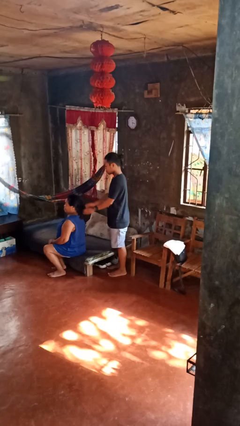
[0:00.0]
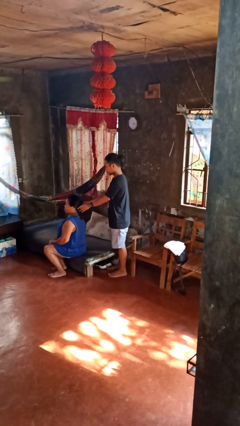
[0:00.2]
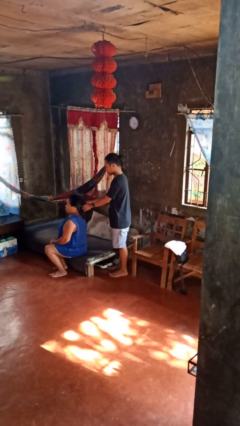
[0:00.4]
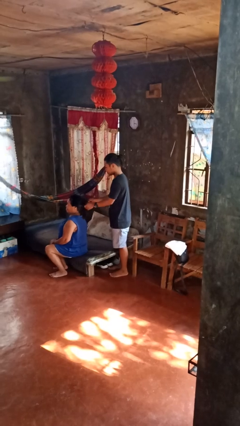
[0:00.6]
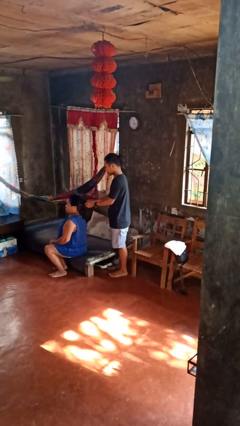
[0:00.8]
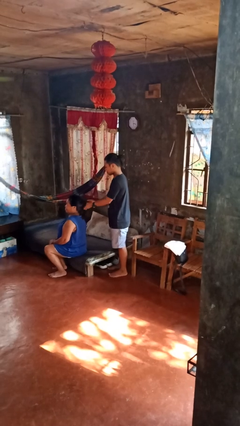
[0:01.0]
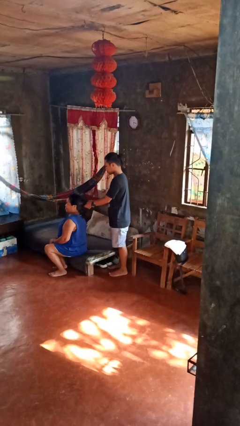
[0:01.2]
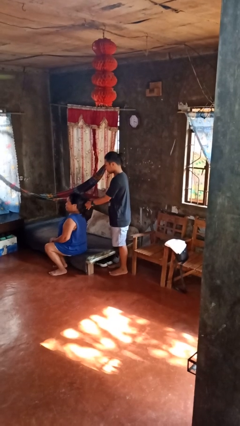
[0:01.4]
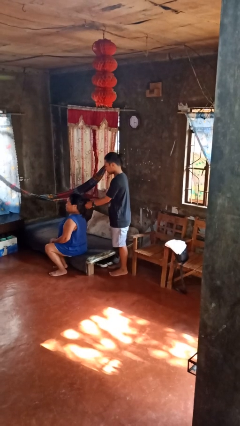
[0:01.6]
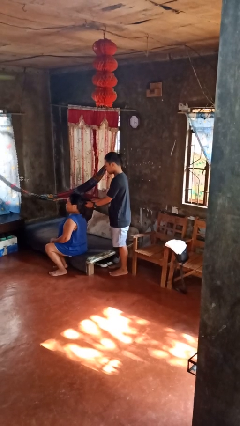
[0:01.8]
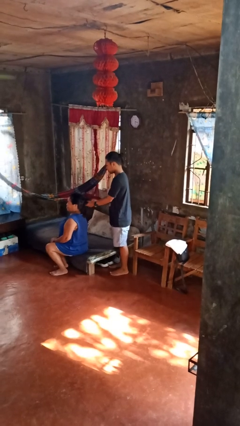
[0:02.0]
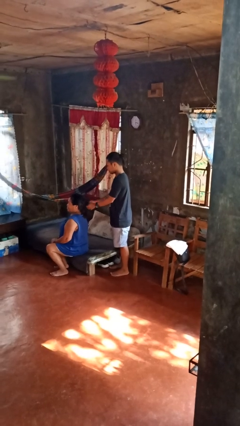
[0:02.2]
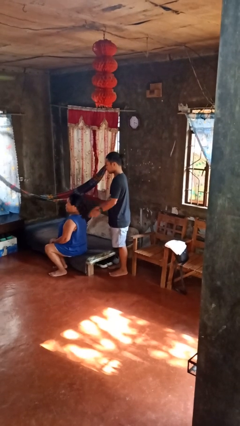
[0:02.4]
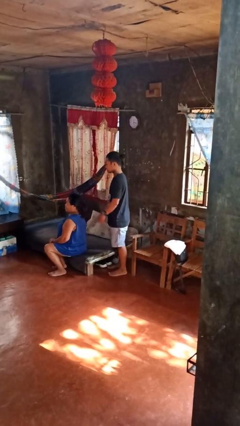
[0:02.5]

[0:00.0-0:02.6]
person braids hair of person

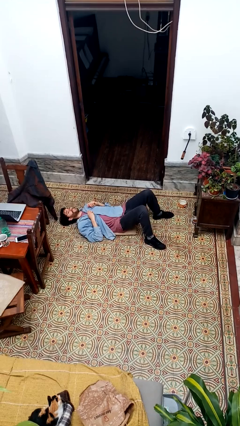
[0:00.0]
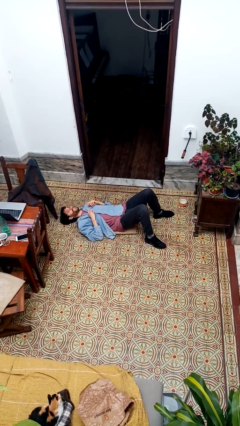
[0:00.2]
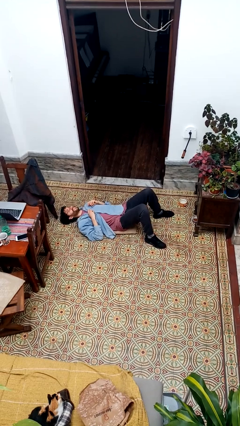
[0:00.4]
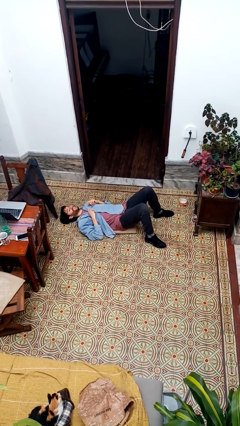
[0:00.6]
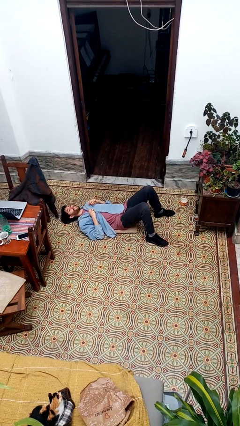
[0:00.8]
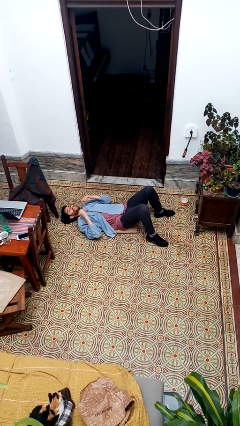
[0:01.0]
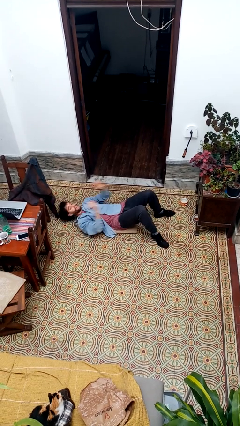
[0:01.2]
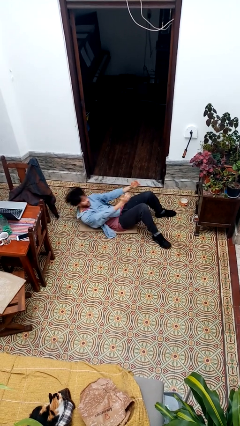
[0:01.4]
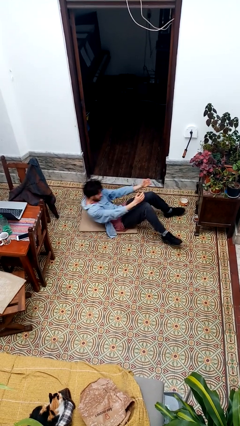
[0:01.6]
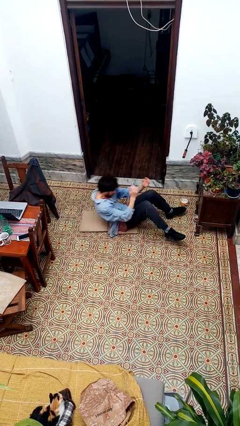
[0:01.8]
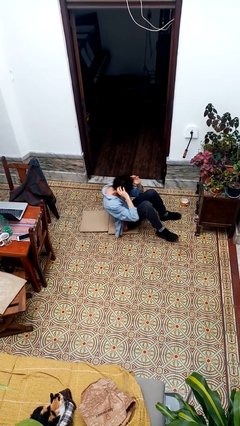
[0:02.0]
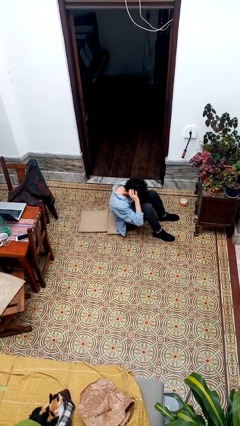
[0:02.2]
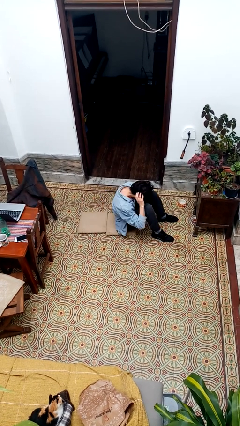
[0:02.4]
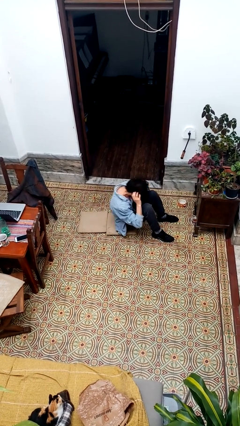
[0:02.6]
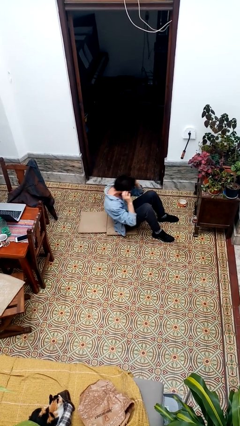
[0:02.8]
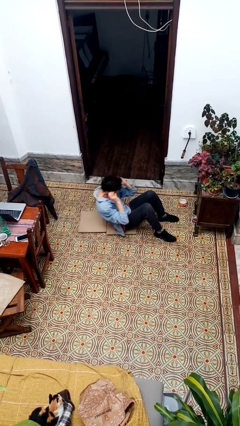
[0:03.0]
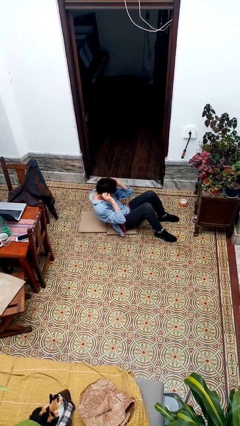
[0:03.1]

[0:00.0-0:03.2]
person exercises with situp

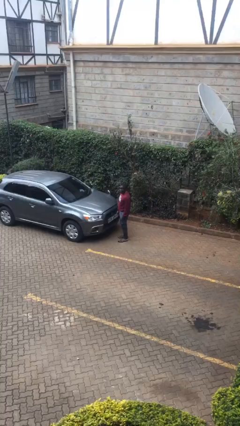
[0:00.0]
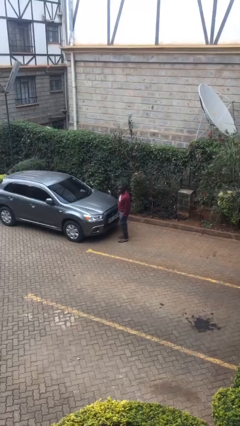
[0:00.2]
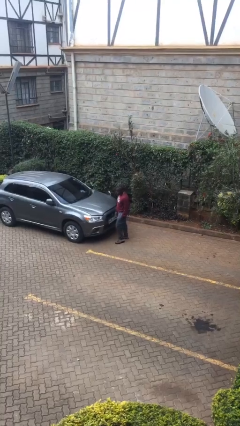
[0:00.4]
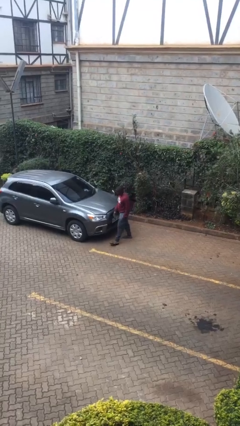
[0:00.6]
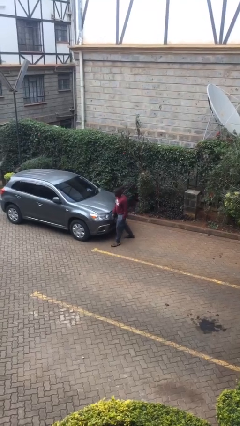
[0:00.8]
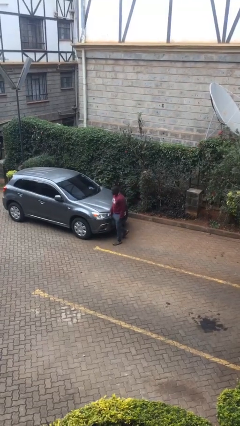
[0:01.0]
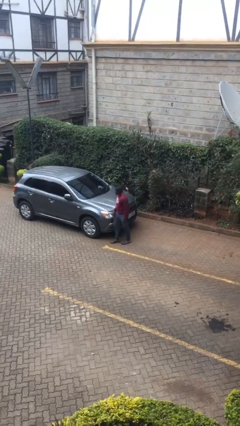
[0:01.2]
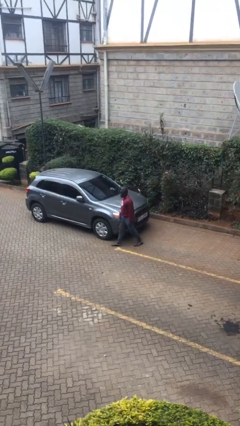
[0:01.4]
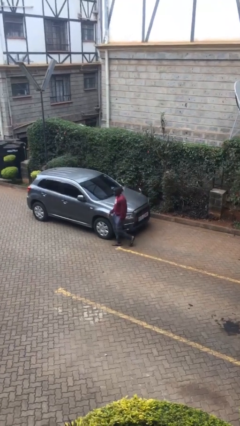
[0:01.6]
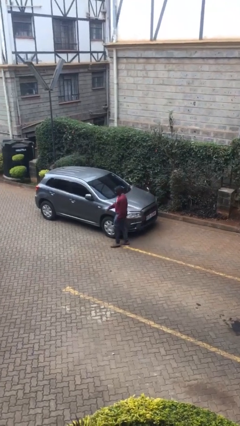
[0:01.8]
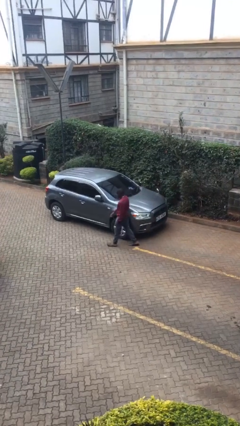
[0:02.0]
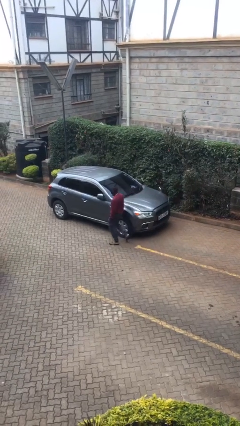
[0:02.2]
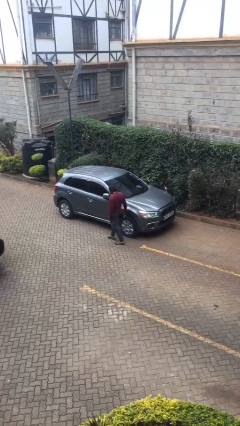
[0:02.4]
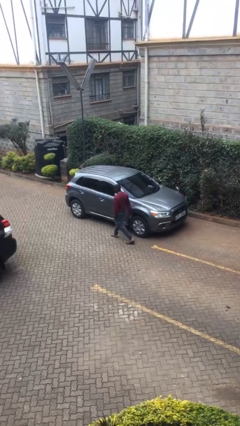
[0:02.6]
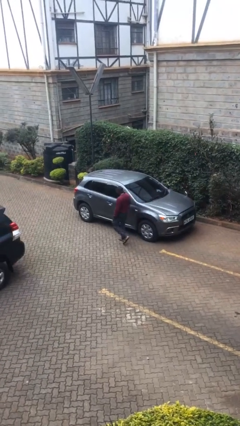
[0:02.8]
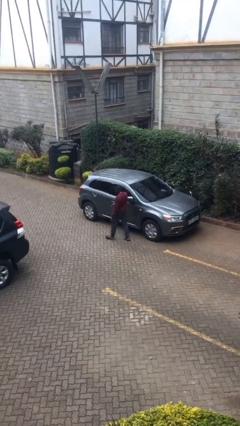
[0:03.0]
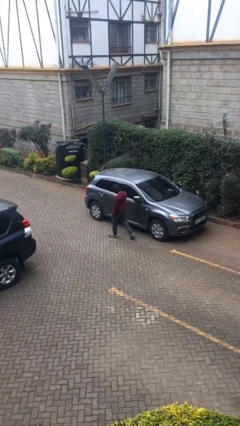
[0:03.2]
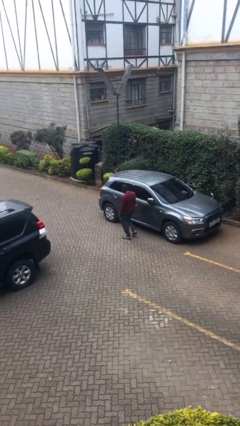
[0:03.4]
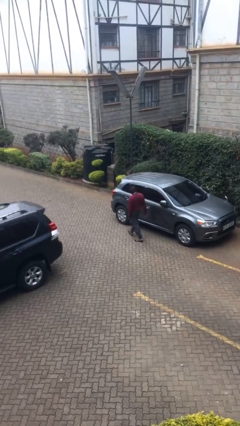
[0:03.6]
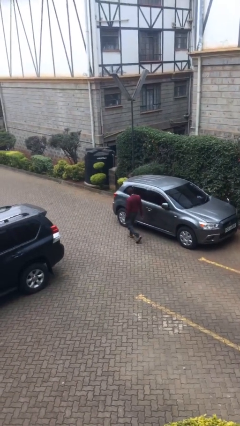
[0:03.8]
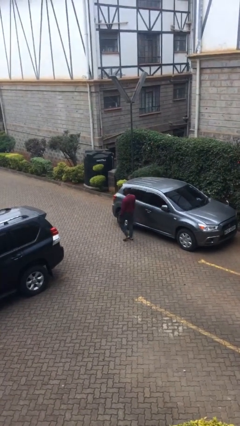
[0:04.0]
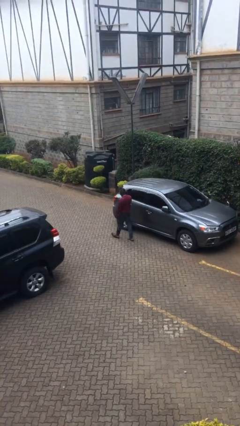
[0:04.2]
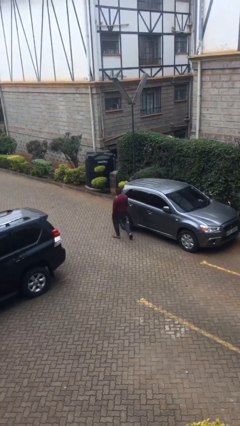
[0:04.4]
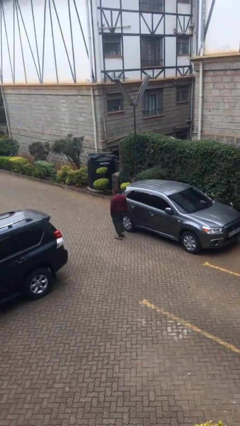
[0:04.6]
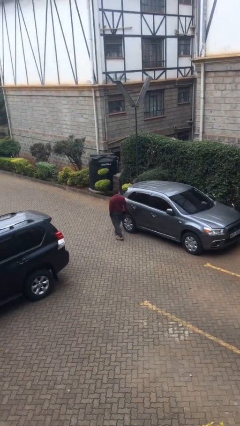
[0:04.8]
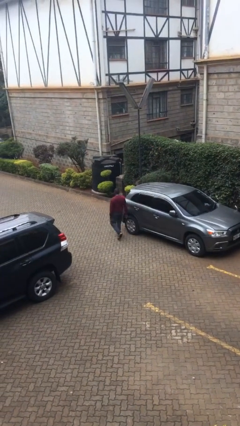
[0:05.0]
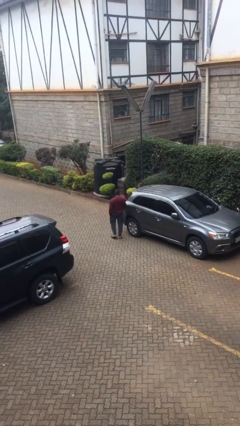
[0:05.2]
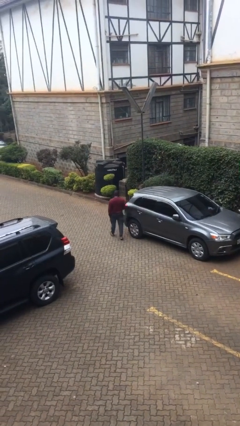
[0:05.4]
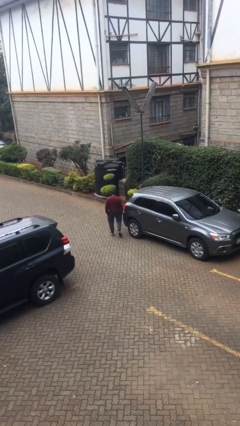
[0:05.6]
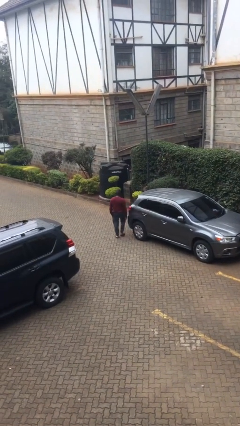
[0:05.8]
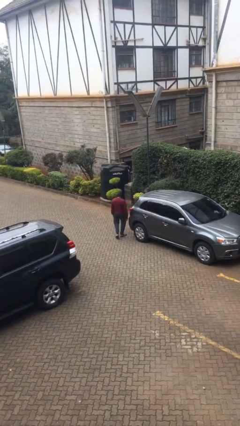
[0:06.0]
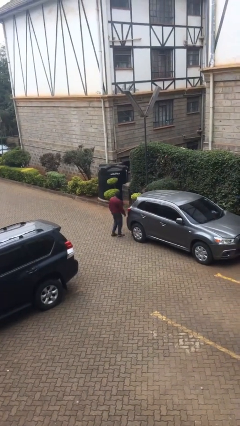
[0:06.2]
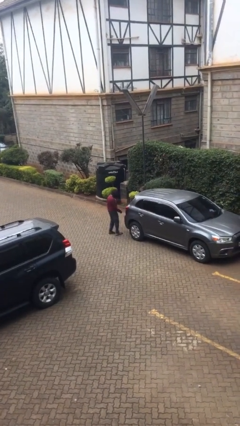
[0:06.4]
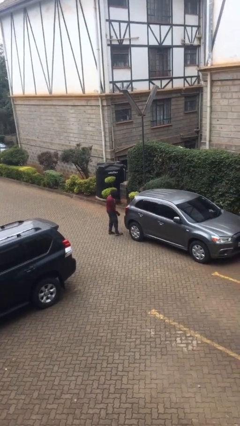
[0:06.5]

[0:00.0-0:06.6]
person walks around car

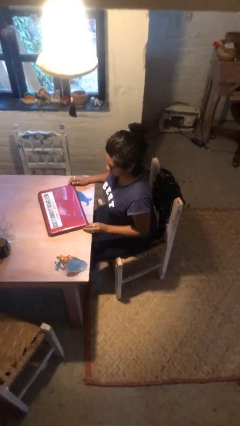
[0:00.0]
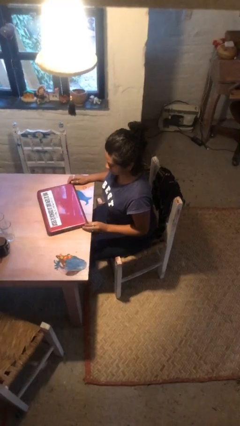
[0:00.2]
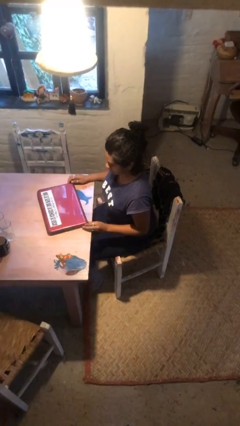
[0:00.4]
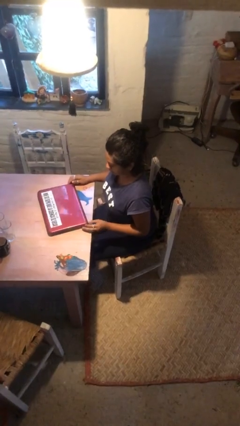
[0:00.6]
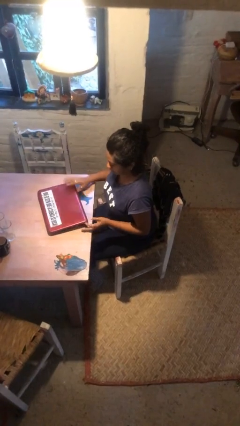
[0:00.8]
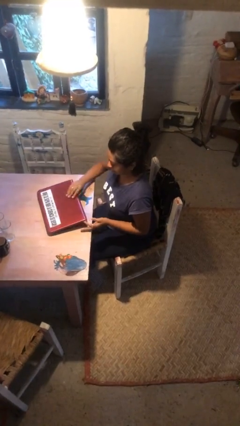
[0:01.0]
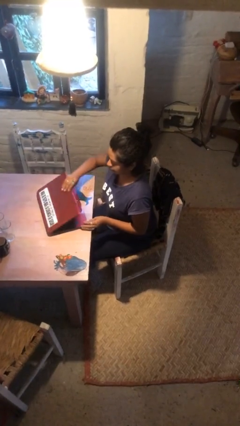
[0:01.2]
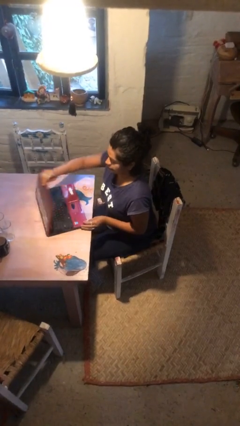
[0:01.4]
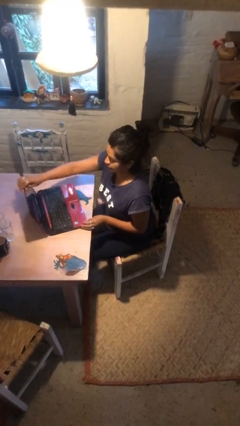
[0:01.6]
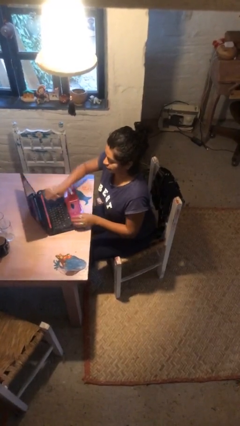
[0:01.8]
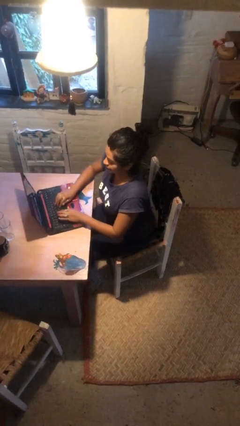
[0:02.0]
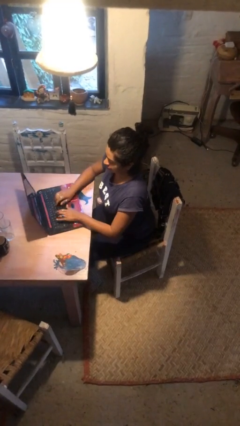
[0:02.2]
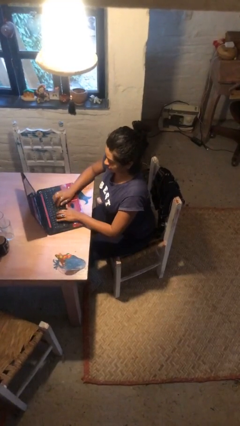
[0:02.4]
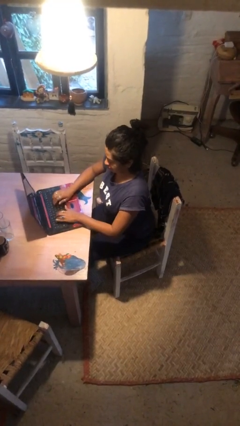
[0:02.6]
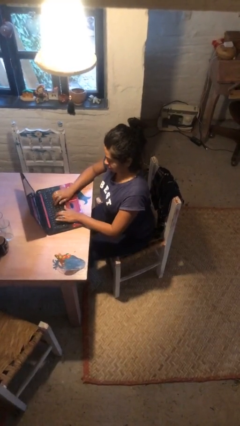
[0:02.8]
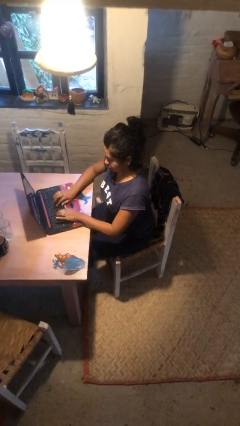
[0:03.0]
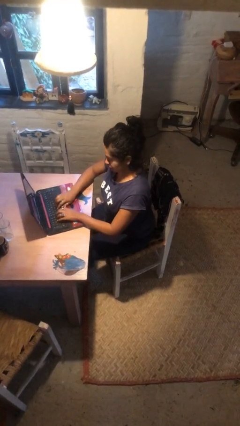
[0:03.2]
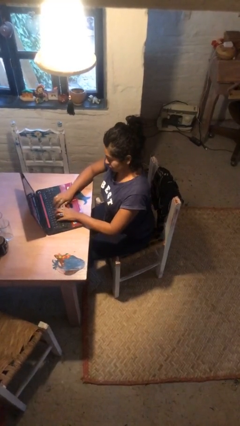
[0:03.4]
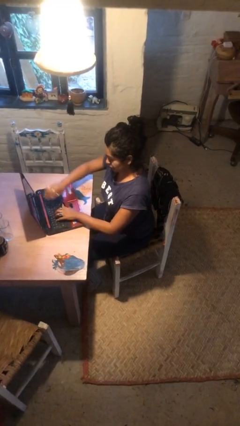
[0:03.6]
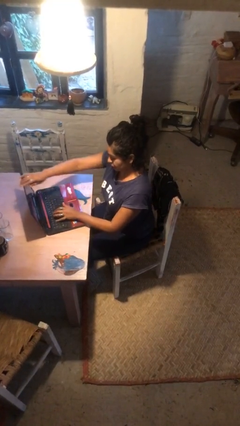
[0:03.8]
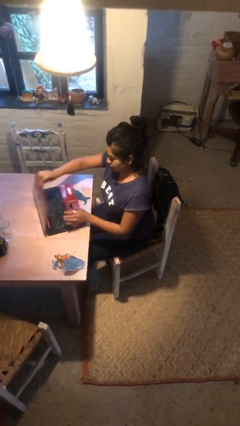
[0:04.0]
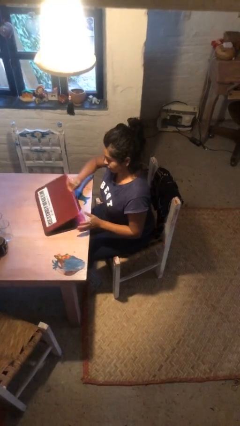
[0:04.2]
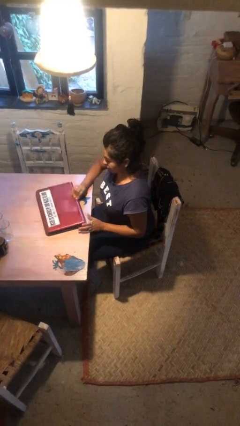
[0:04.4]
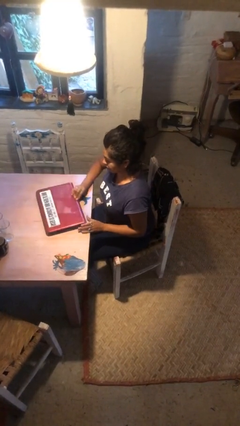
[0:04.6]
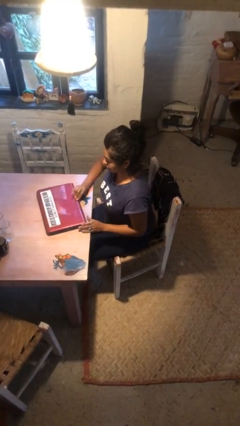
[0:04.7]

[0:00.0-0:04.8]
person interacts with laptop

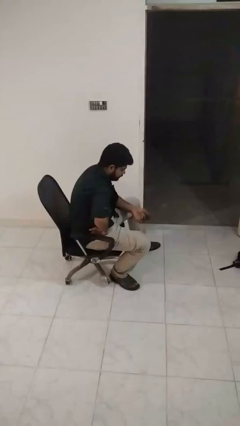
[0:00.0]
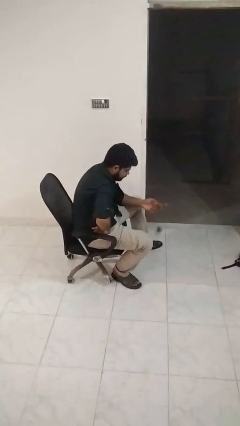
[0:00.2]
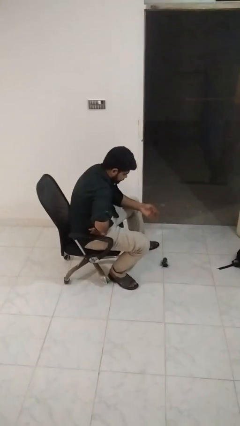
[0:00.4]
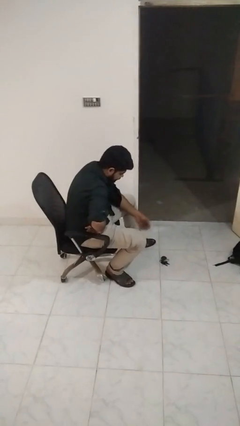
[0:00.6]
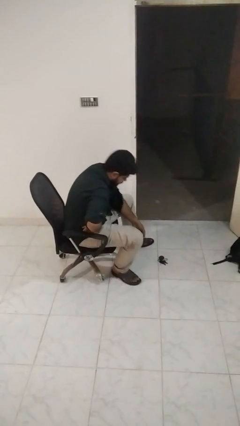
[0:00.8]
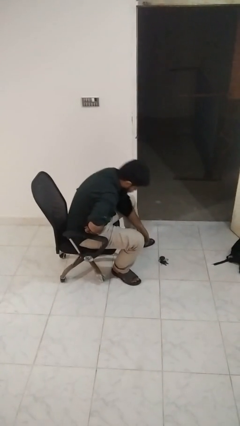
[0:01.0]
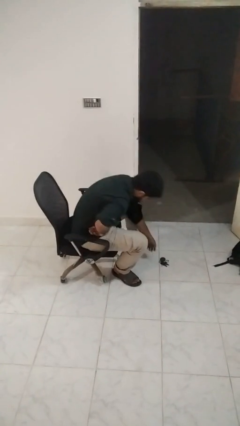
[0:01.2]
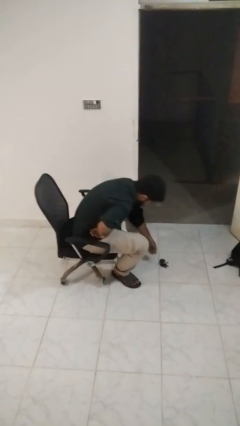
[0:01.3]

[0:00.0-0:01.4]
person drops object
